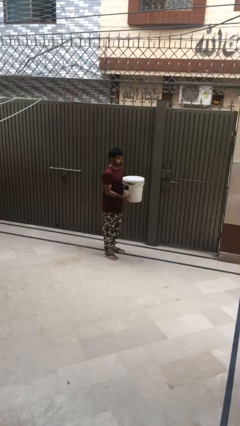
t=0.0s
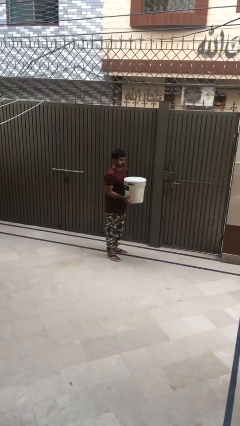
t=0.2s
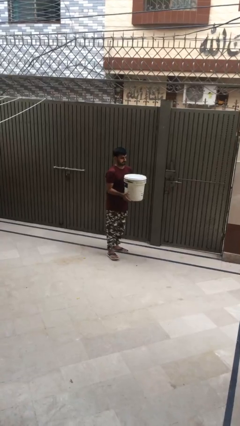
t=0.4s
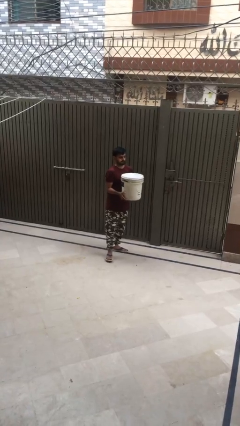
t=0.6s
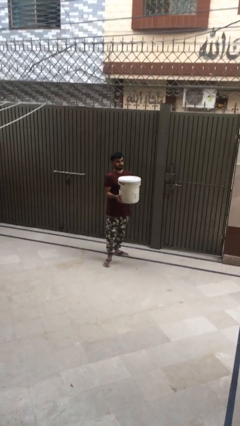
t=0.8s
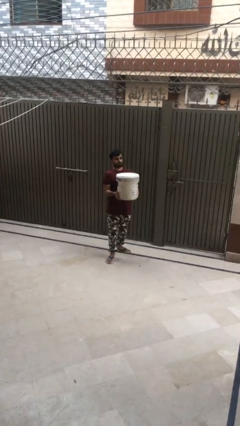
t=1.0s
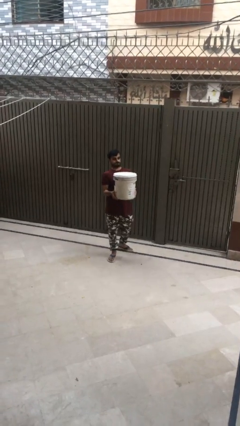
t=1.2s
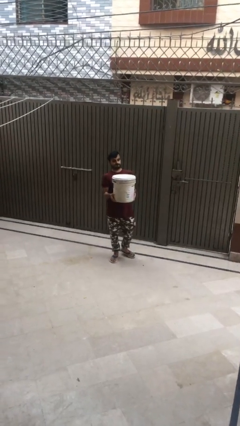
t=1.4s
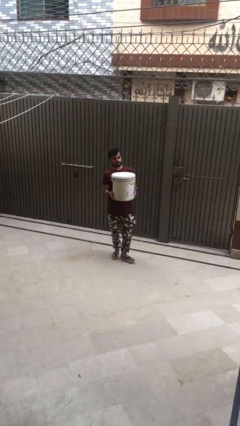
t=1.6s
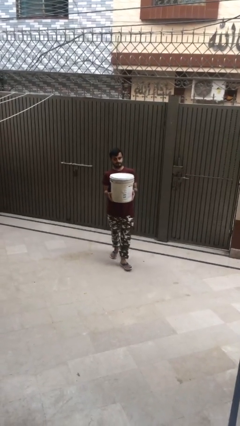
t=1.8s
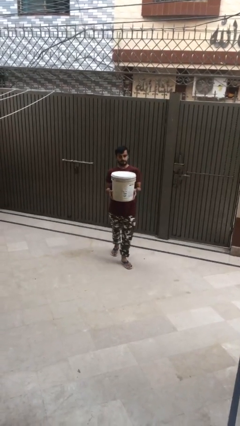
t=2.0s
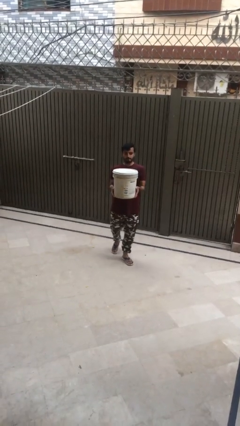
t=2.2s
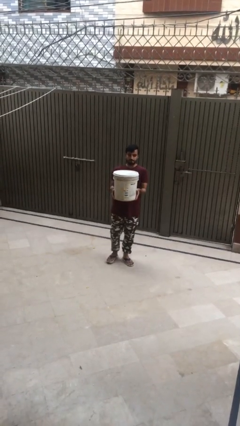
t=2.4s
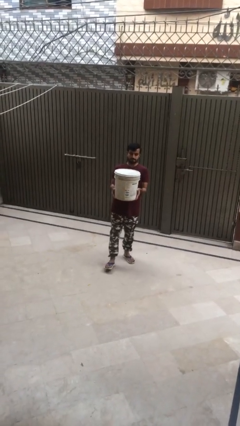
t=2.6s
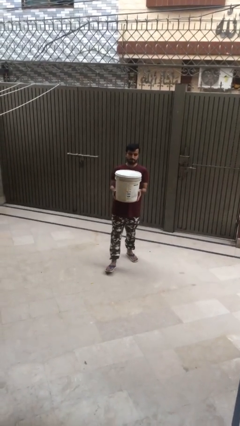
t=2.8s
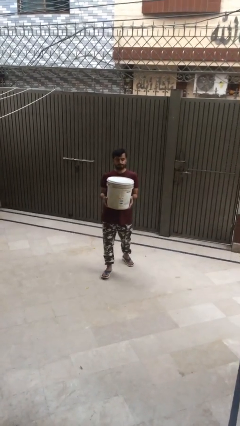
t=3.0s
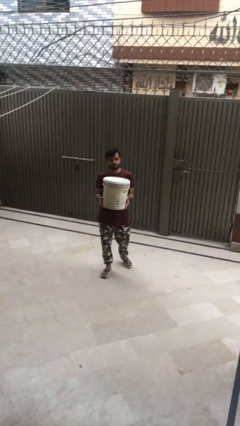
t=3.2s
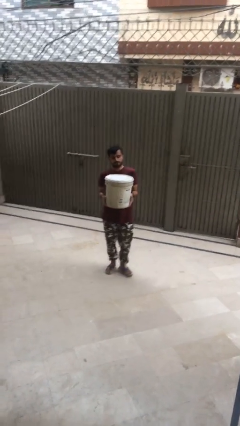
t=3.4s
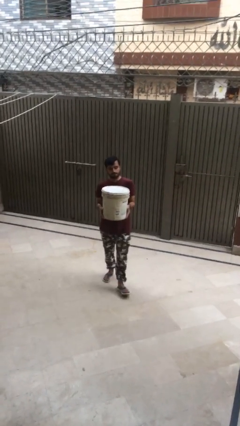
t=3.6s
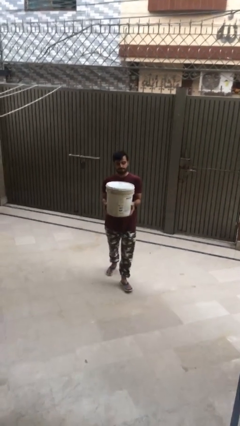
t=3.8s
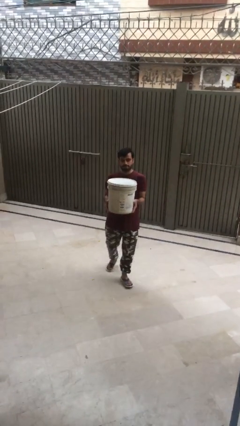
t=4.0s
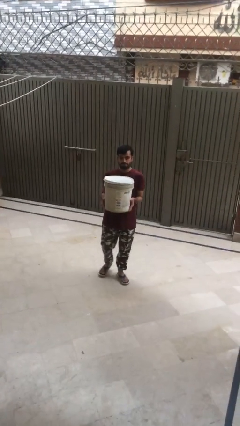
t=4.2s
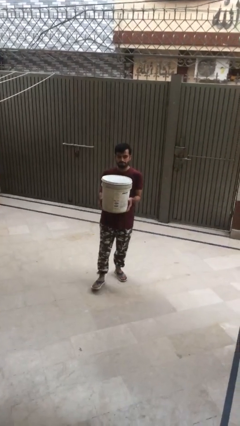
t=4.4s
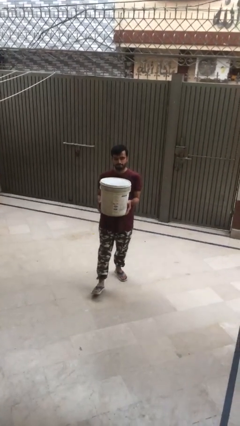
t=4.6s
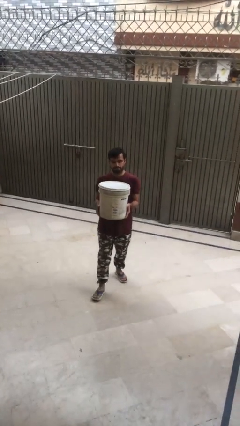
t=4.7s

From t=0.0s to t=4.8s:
person carries heavy object

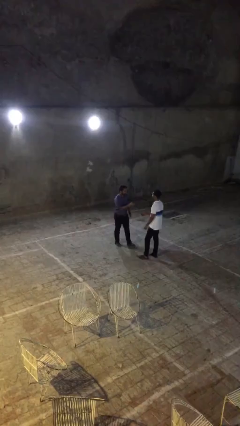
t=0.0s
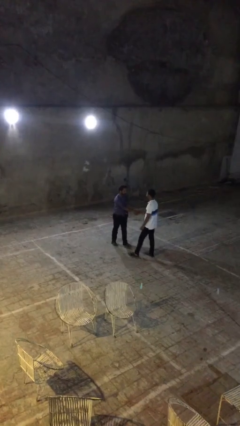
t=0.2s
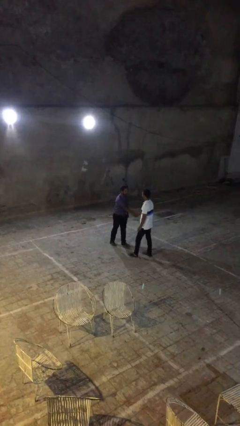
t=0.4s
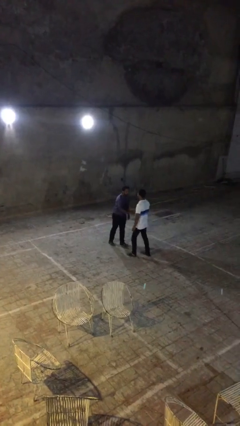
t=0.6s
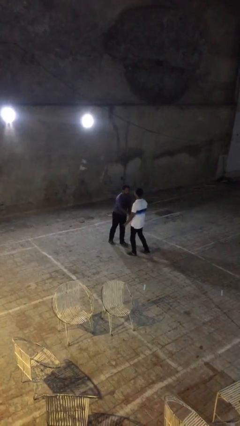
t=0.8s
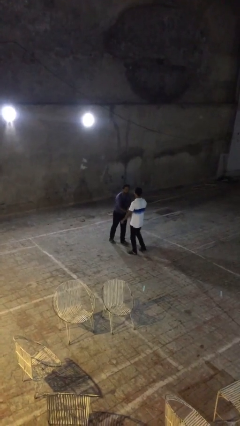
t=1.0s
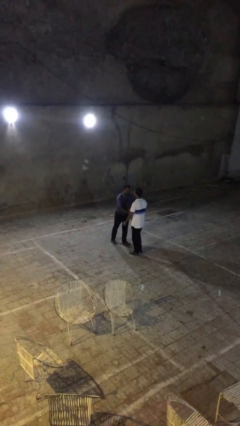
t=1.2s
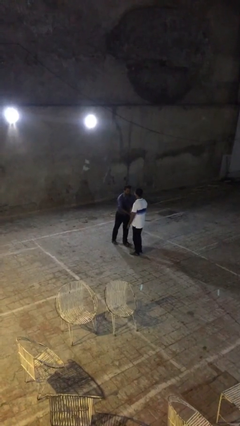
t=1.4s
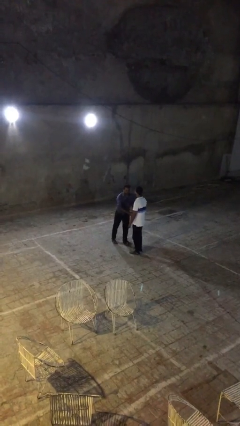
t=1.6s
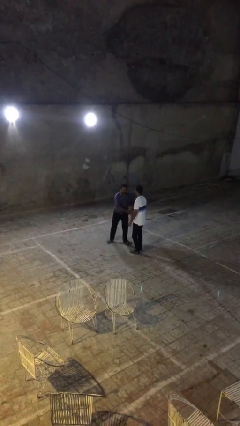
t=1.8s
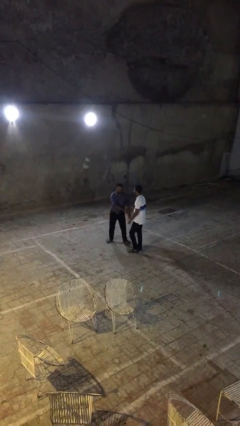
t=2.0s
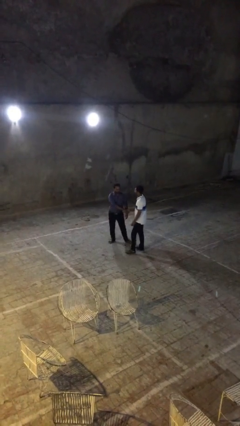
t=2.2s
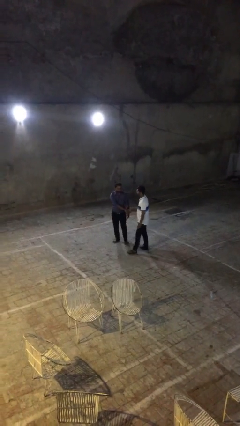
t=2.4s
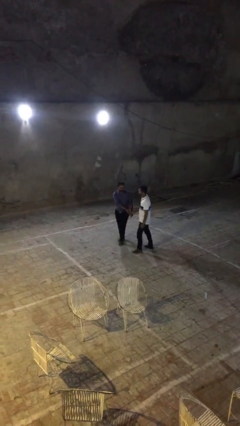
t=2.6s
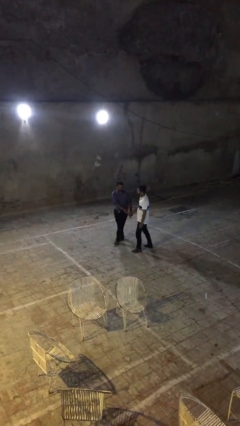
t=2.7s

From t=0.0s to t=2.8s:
person shakes hand

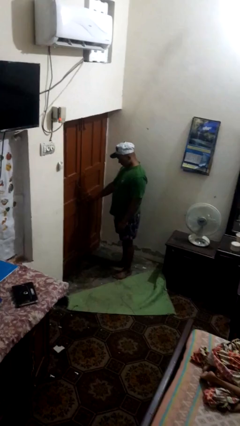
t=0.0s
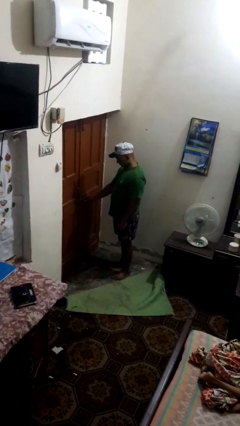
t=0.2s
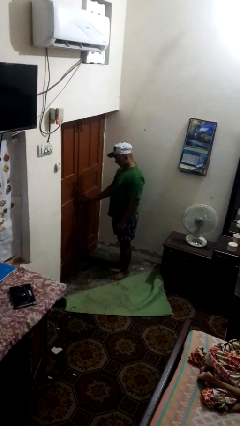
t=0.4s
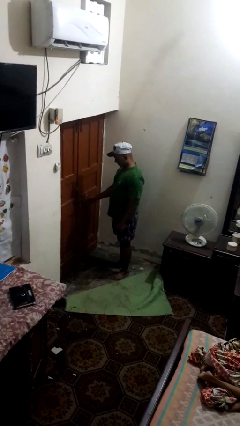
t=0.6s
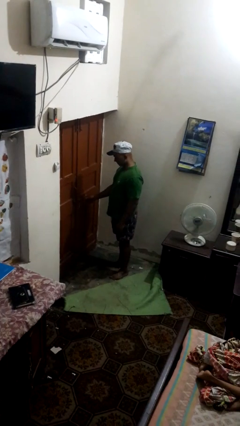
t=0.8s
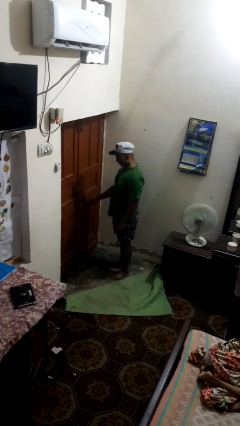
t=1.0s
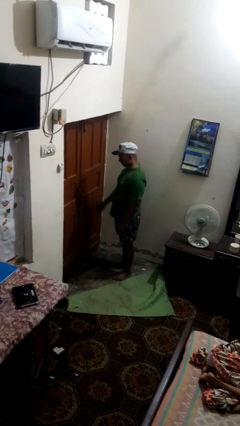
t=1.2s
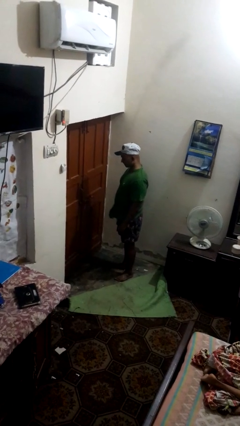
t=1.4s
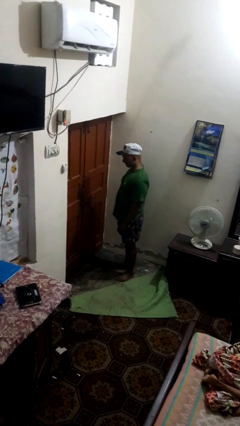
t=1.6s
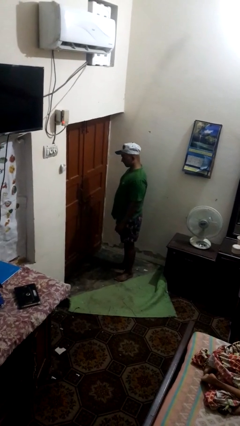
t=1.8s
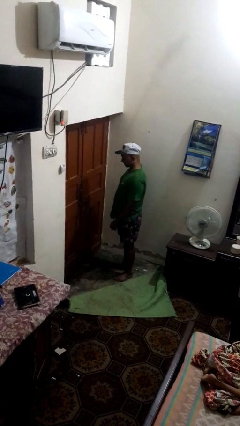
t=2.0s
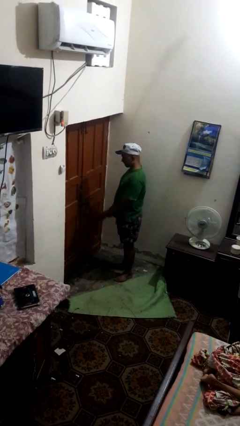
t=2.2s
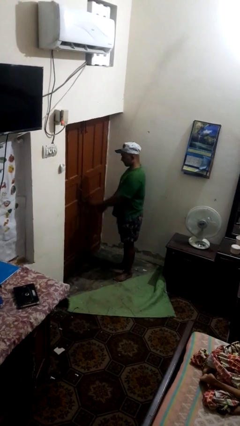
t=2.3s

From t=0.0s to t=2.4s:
person unlocks door with keys

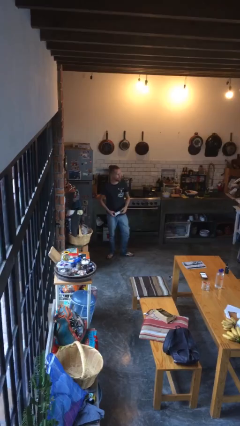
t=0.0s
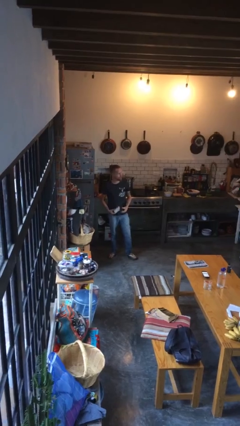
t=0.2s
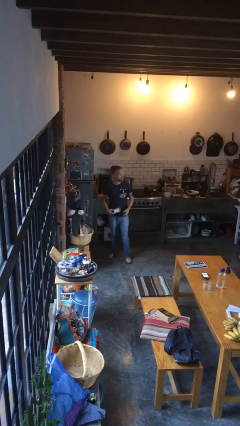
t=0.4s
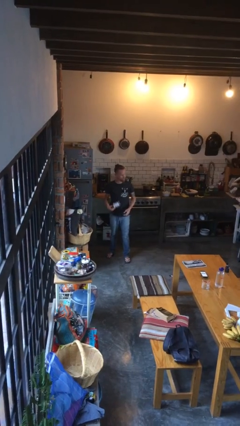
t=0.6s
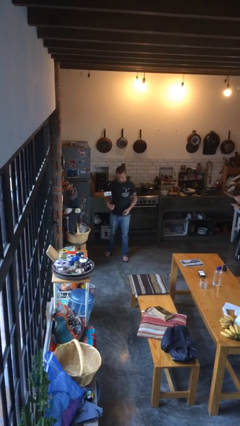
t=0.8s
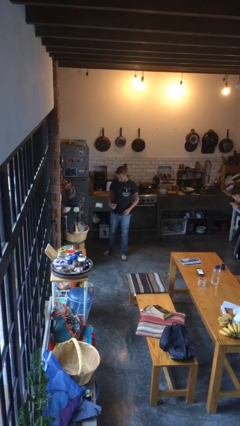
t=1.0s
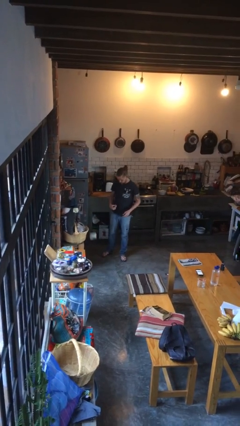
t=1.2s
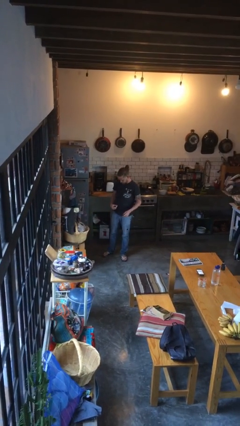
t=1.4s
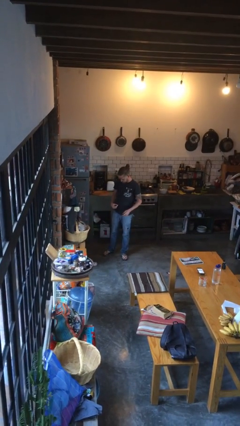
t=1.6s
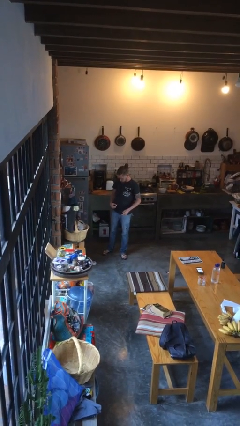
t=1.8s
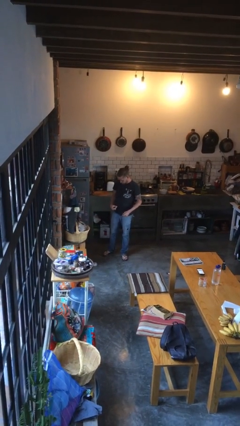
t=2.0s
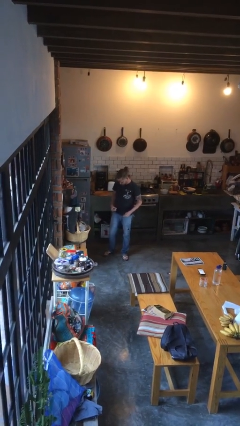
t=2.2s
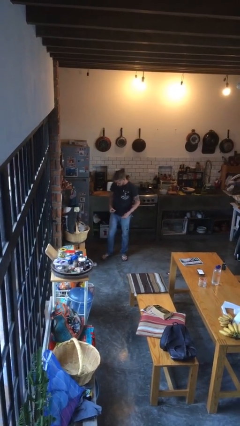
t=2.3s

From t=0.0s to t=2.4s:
person drops object

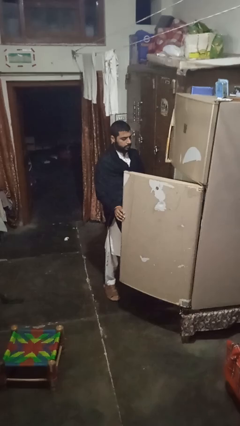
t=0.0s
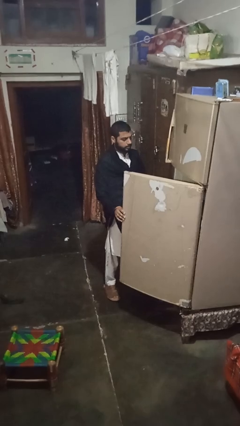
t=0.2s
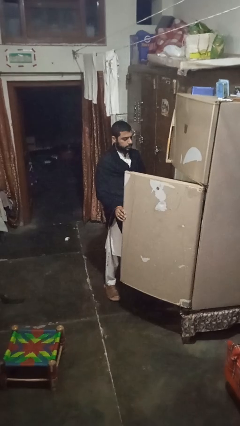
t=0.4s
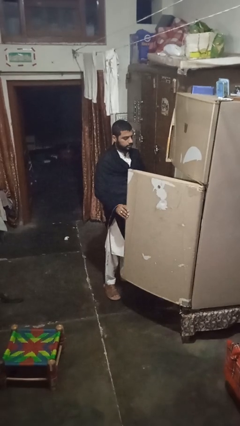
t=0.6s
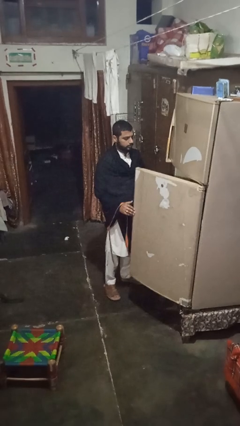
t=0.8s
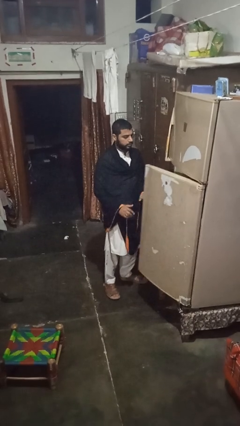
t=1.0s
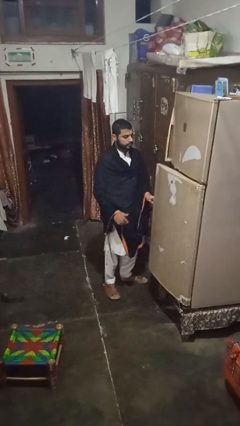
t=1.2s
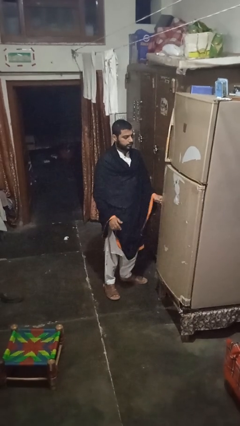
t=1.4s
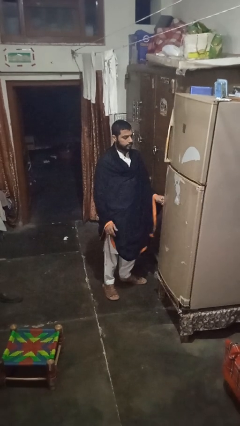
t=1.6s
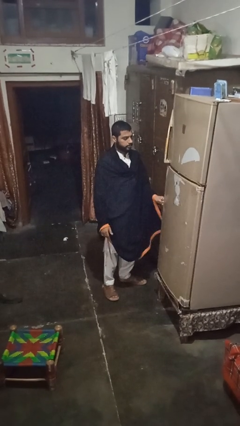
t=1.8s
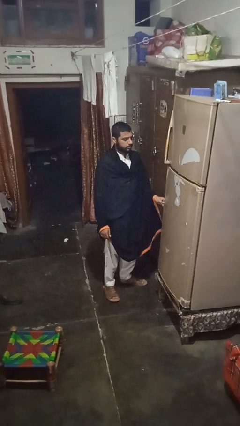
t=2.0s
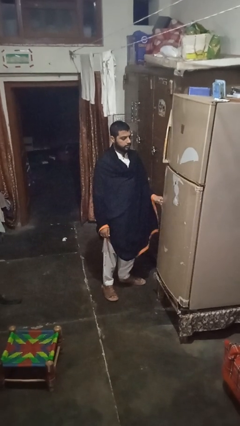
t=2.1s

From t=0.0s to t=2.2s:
person closes refrigerator

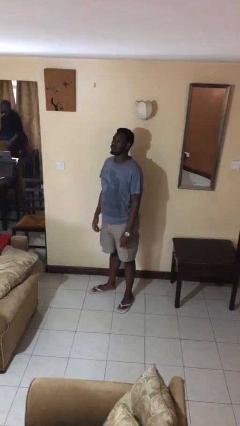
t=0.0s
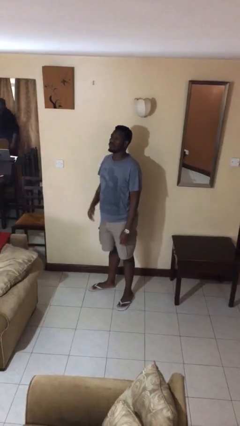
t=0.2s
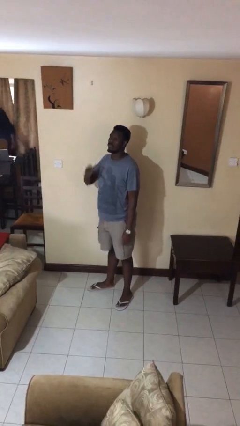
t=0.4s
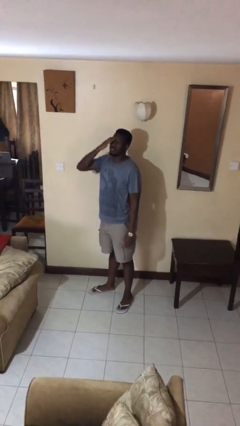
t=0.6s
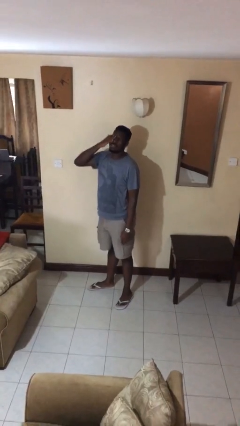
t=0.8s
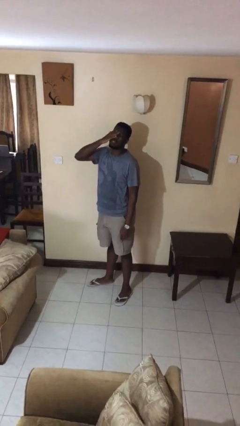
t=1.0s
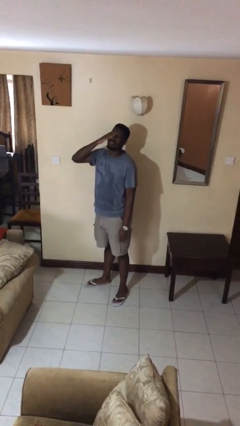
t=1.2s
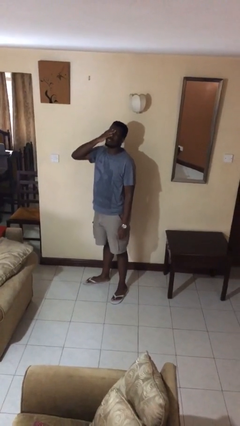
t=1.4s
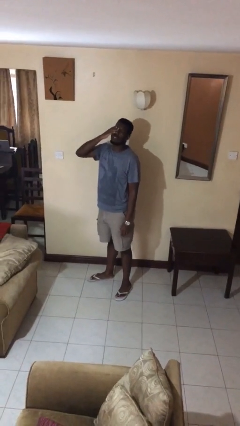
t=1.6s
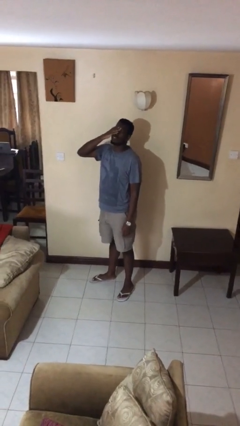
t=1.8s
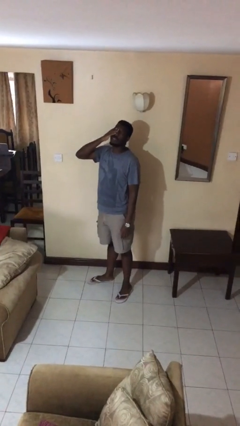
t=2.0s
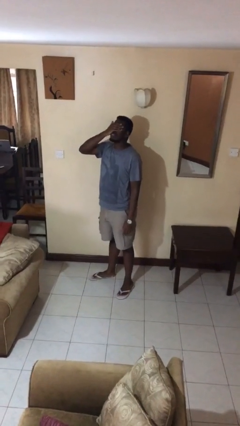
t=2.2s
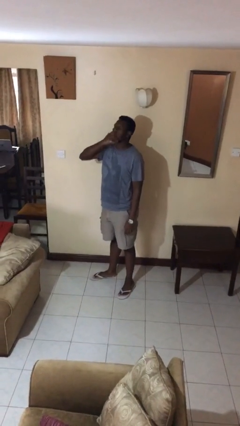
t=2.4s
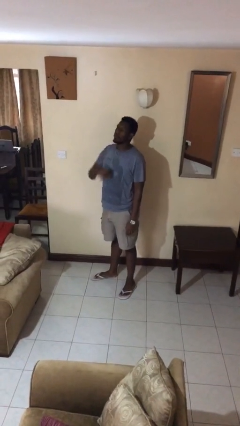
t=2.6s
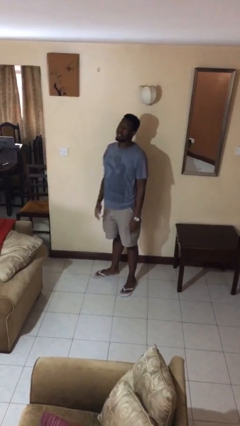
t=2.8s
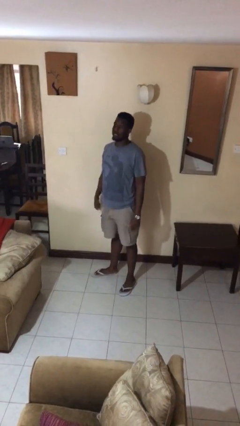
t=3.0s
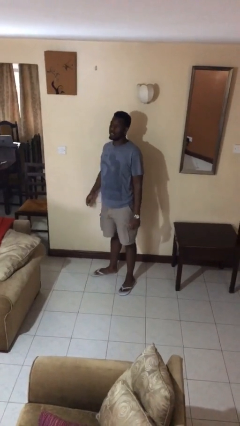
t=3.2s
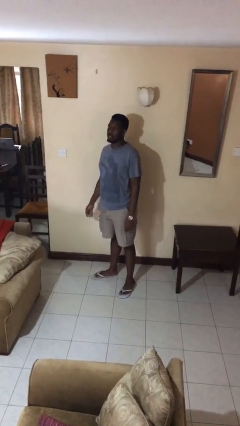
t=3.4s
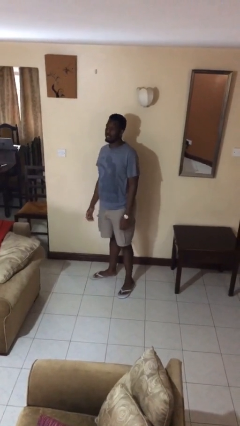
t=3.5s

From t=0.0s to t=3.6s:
person rubs eyes
